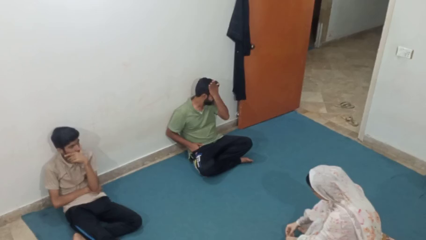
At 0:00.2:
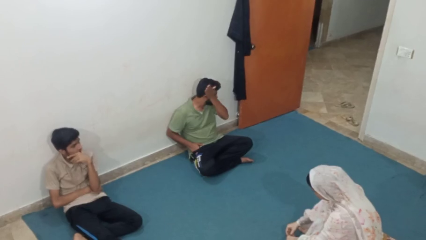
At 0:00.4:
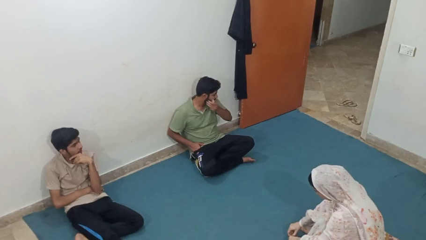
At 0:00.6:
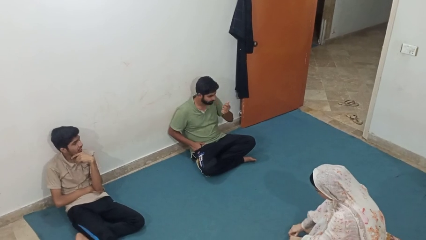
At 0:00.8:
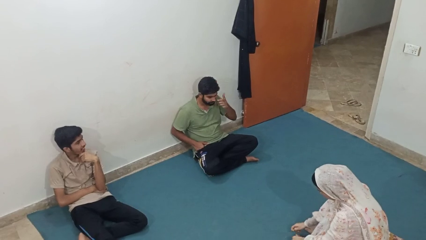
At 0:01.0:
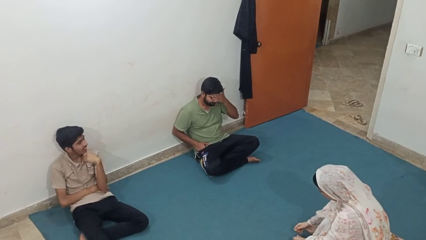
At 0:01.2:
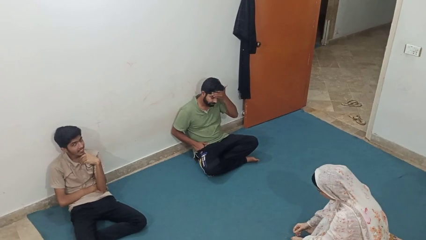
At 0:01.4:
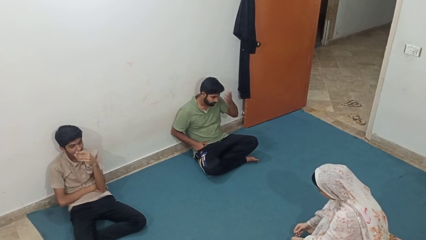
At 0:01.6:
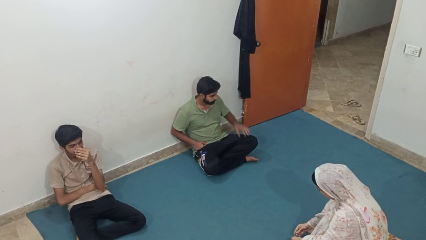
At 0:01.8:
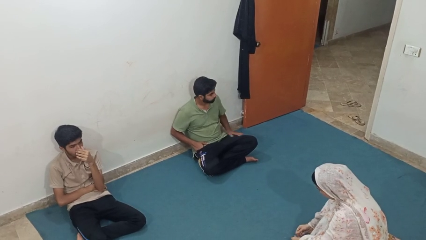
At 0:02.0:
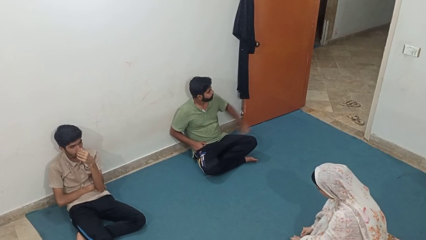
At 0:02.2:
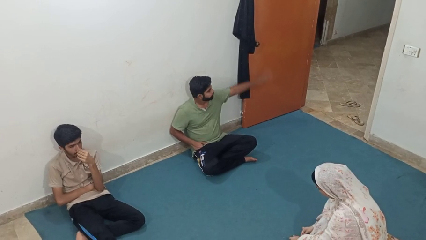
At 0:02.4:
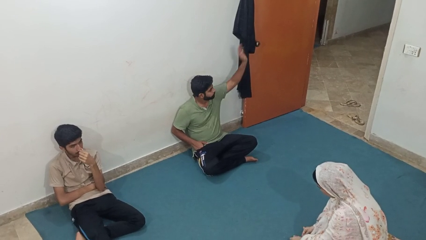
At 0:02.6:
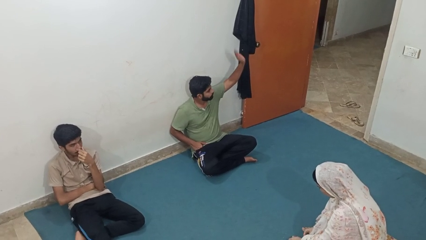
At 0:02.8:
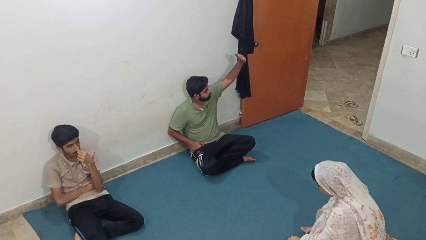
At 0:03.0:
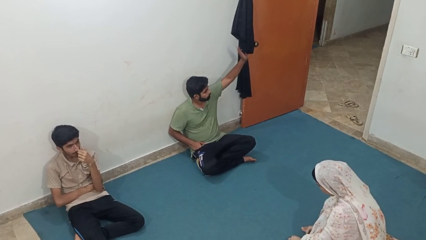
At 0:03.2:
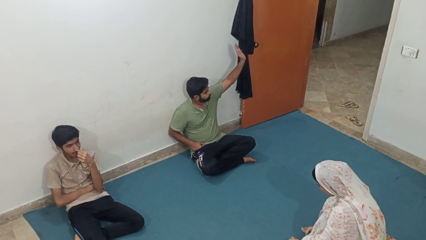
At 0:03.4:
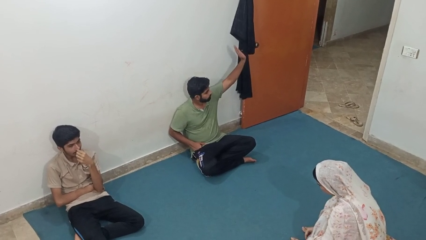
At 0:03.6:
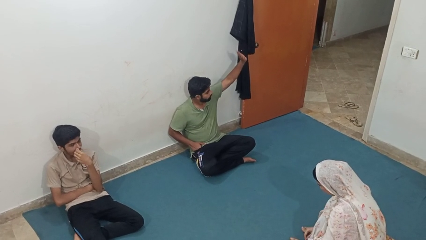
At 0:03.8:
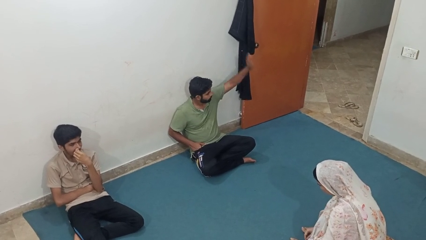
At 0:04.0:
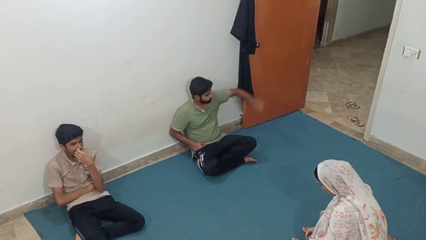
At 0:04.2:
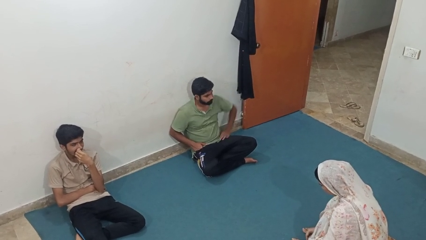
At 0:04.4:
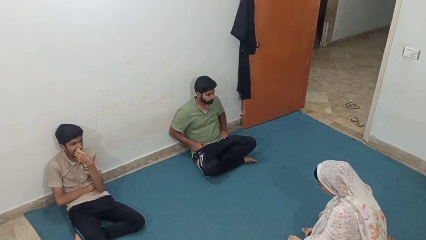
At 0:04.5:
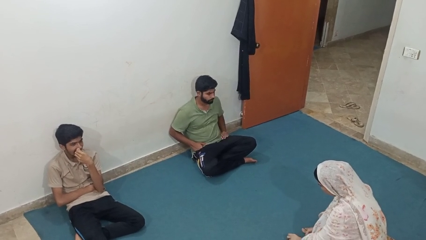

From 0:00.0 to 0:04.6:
person waves at person

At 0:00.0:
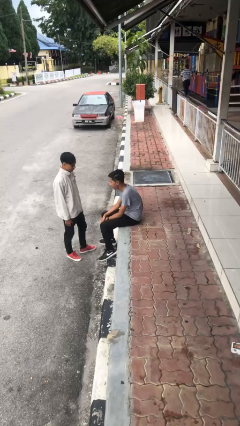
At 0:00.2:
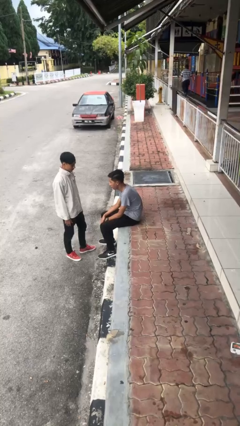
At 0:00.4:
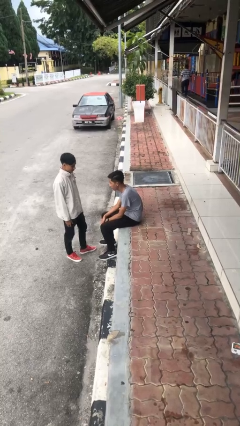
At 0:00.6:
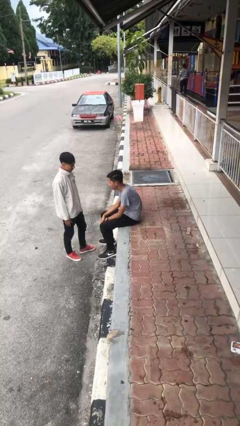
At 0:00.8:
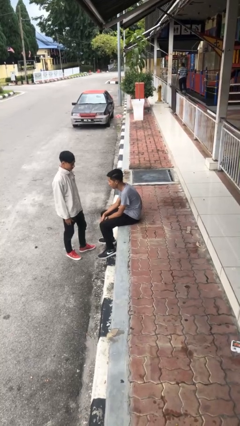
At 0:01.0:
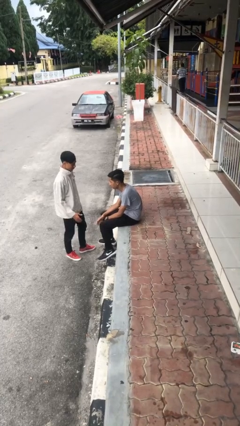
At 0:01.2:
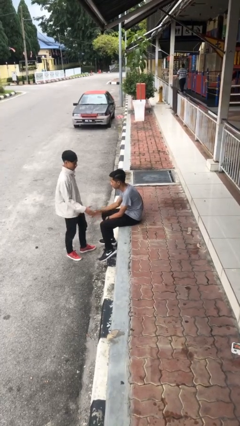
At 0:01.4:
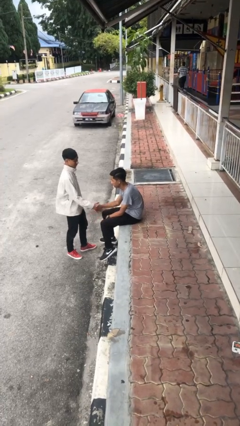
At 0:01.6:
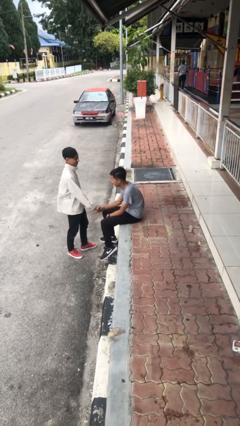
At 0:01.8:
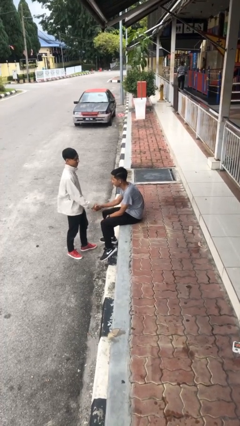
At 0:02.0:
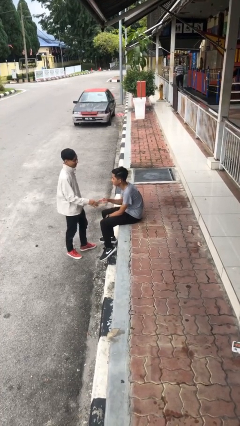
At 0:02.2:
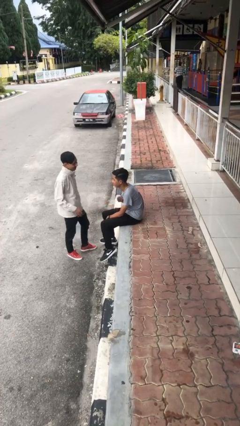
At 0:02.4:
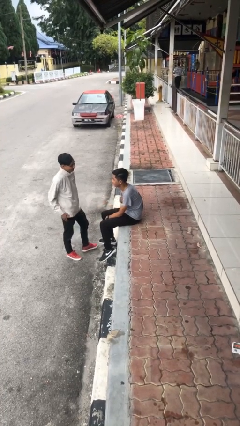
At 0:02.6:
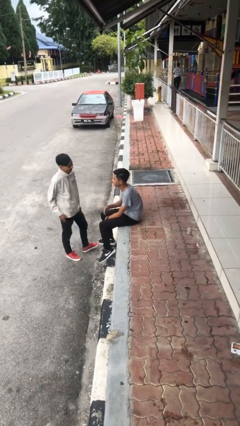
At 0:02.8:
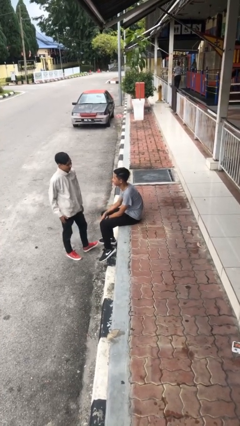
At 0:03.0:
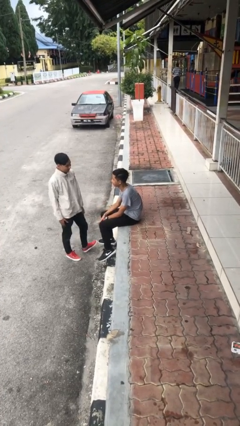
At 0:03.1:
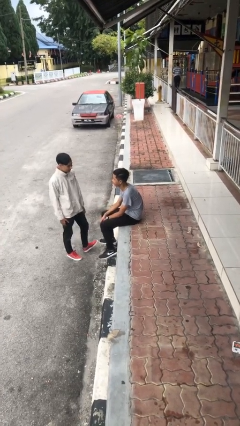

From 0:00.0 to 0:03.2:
person shakes hand

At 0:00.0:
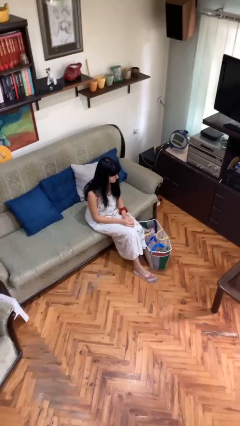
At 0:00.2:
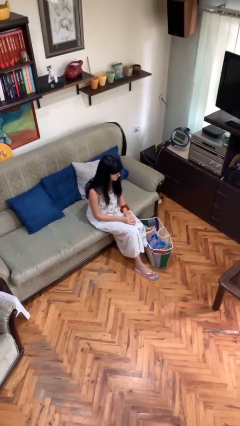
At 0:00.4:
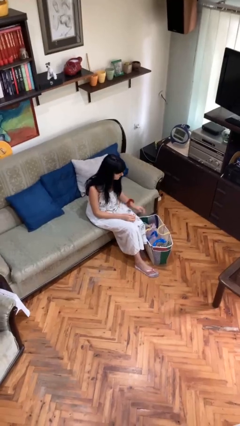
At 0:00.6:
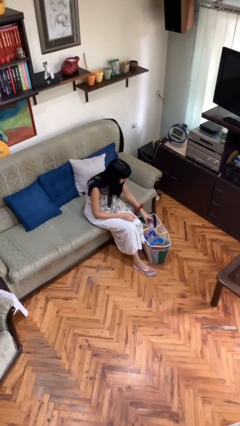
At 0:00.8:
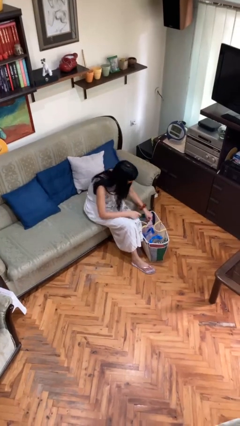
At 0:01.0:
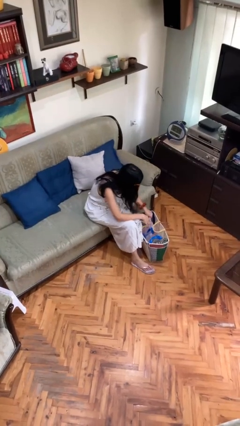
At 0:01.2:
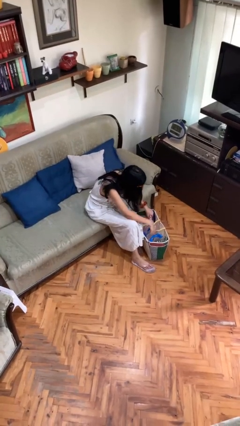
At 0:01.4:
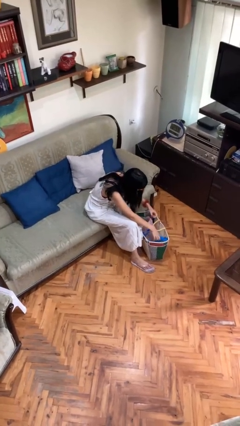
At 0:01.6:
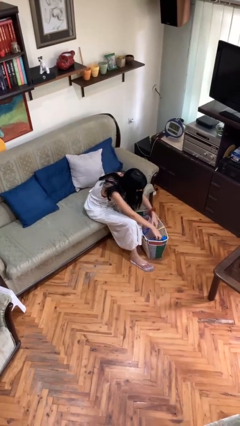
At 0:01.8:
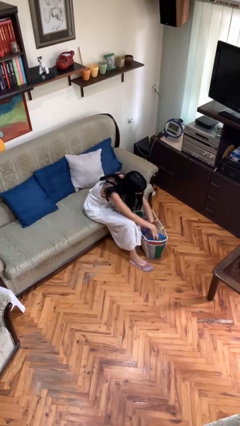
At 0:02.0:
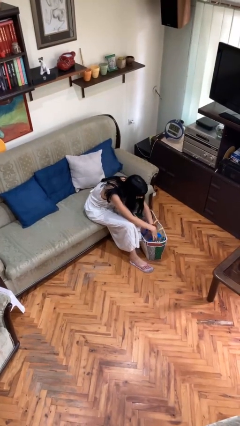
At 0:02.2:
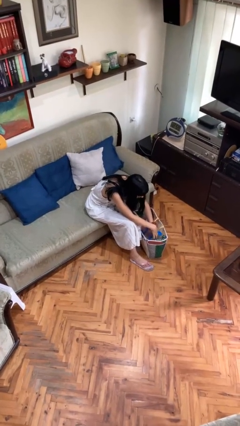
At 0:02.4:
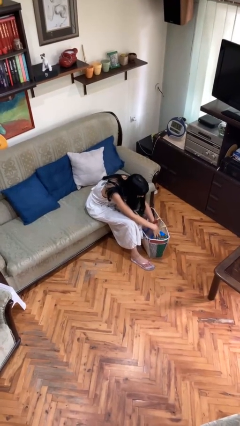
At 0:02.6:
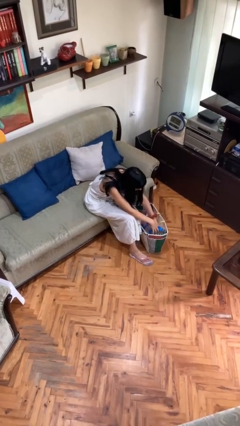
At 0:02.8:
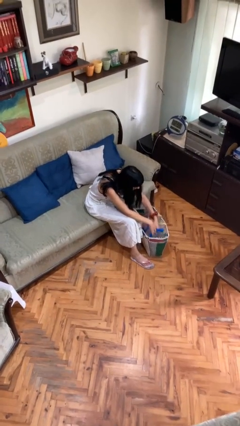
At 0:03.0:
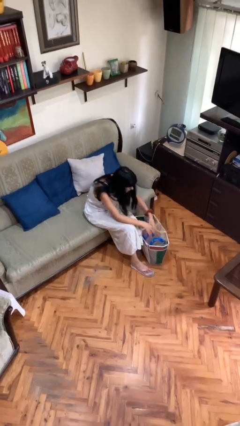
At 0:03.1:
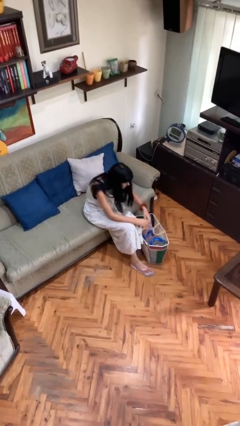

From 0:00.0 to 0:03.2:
person searches in bag

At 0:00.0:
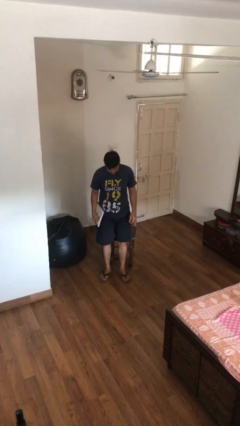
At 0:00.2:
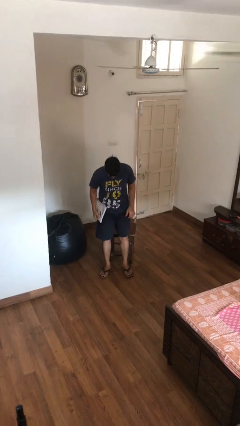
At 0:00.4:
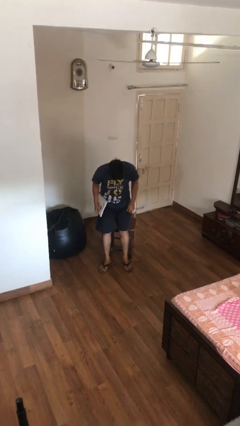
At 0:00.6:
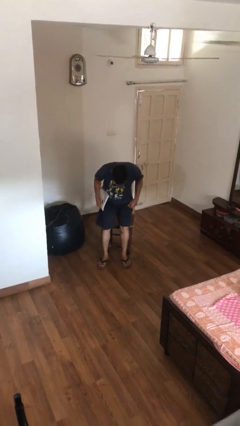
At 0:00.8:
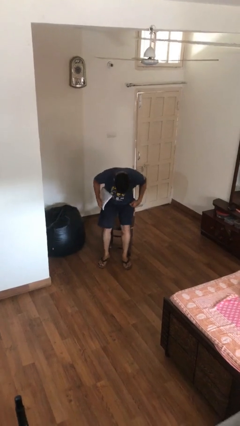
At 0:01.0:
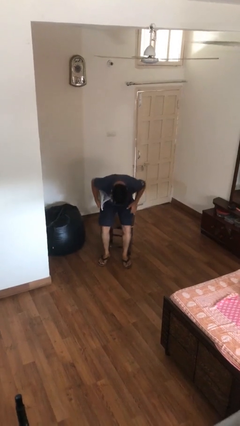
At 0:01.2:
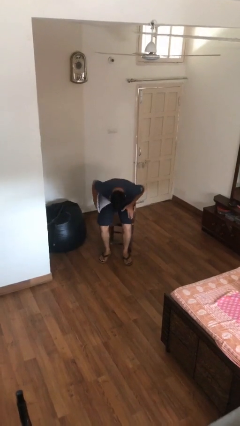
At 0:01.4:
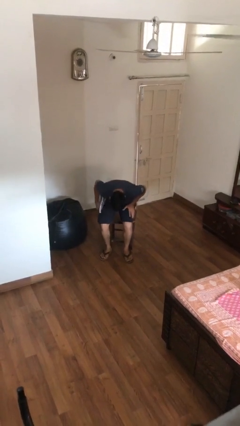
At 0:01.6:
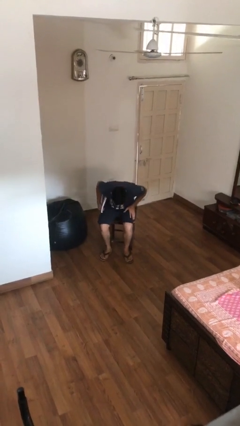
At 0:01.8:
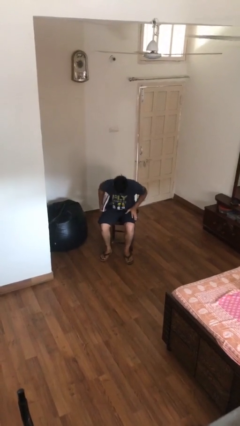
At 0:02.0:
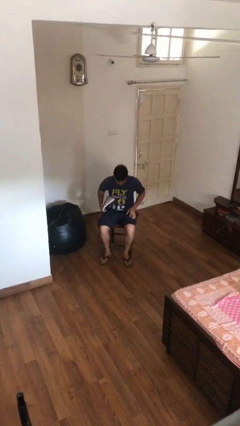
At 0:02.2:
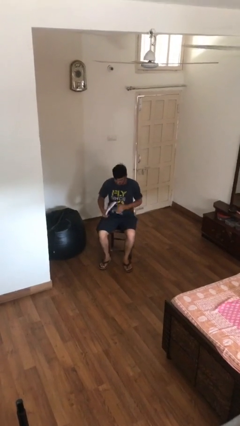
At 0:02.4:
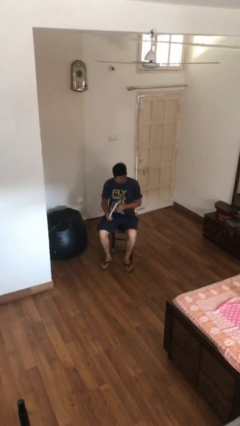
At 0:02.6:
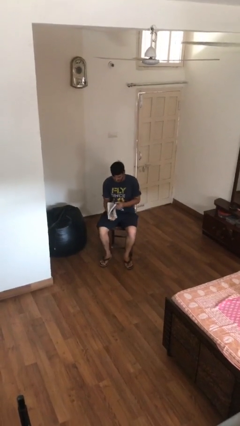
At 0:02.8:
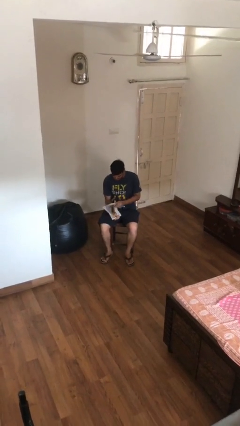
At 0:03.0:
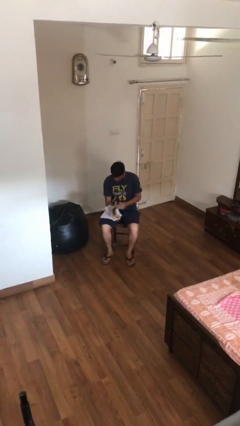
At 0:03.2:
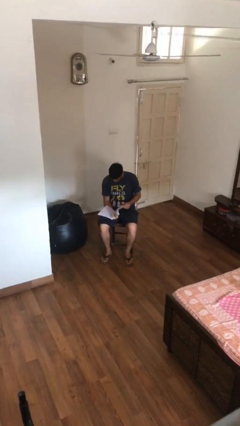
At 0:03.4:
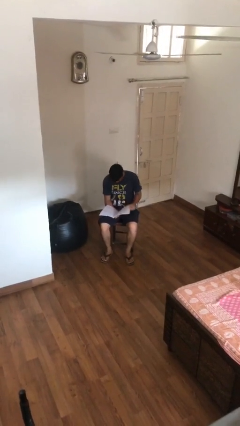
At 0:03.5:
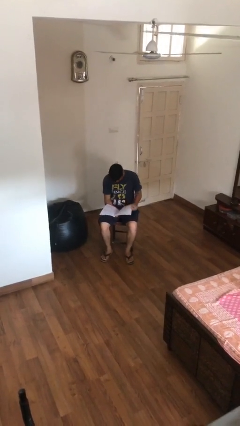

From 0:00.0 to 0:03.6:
person sits down

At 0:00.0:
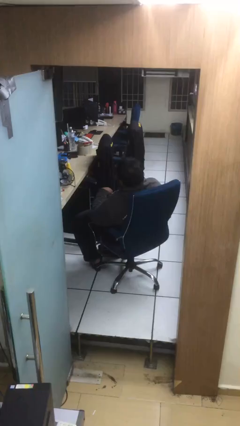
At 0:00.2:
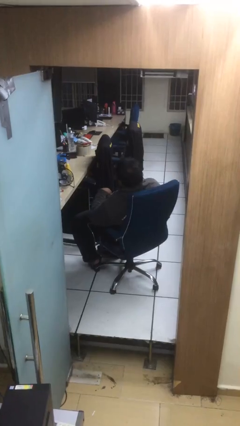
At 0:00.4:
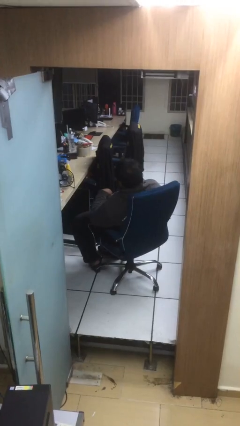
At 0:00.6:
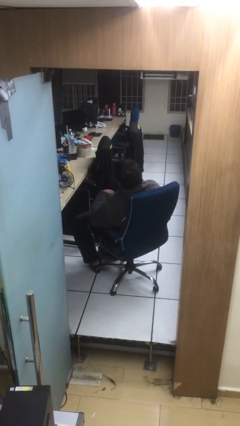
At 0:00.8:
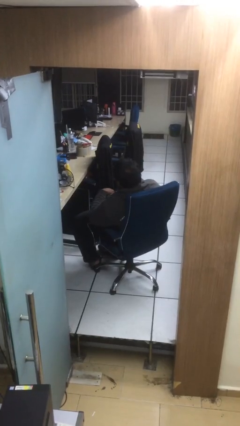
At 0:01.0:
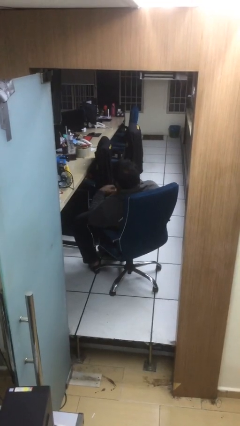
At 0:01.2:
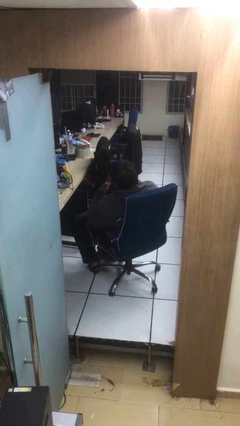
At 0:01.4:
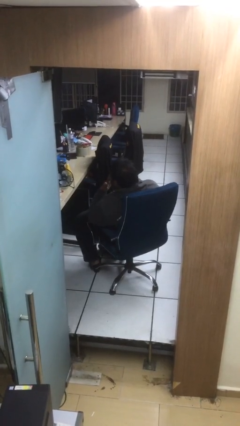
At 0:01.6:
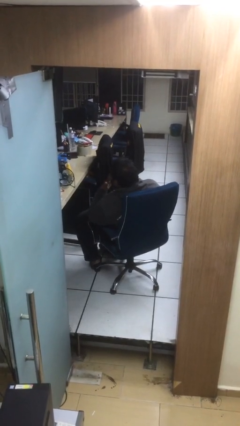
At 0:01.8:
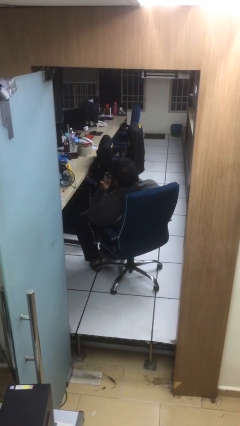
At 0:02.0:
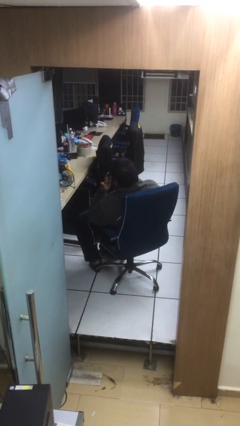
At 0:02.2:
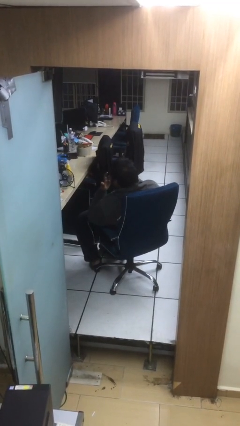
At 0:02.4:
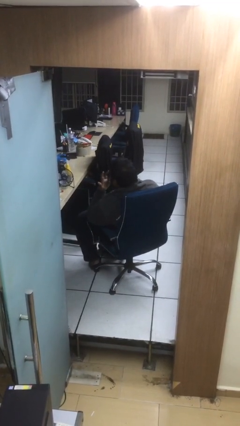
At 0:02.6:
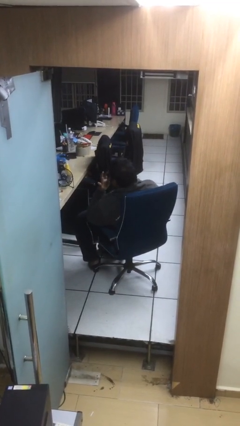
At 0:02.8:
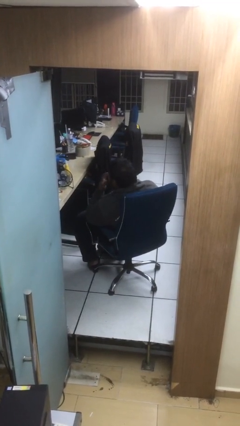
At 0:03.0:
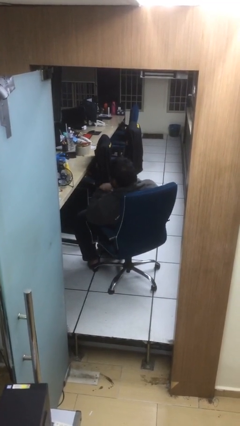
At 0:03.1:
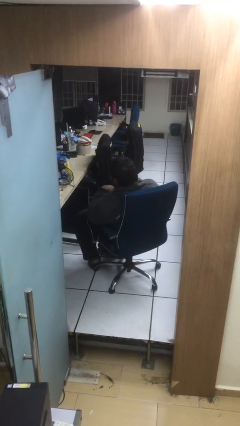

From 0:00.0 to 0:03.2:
person licks fingers
